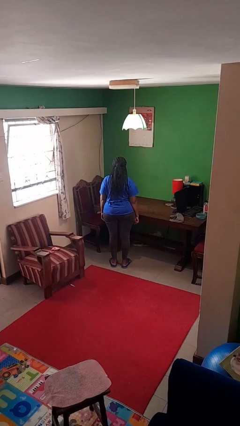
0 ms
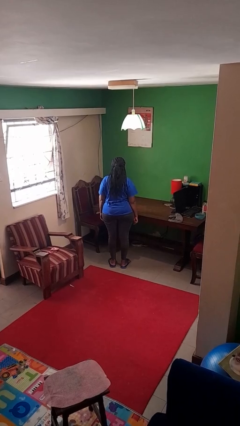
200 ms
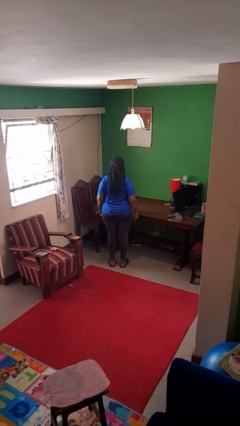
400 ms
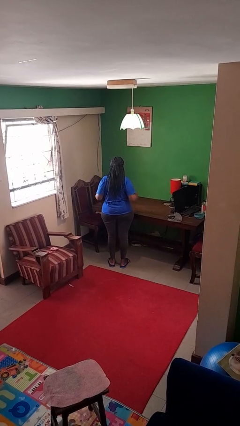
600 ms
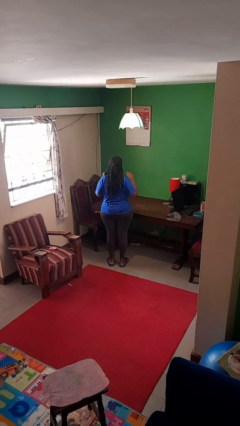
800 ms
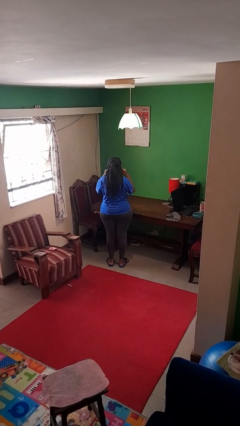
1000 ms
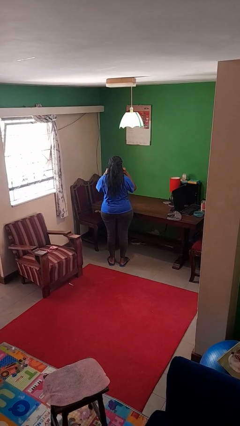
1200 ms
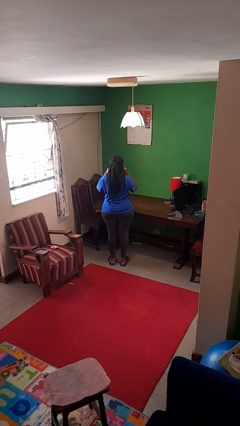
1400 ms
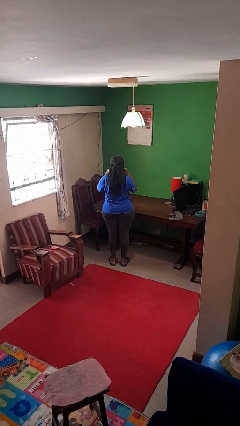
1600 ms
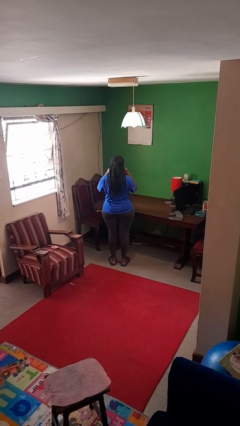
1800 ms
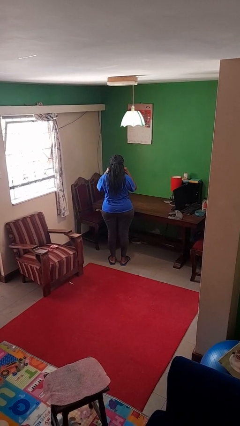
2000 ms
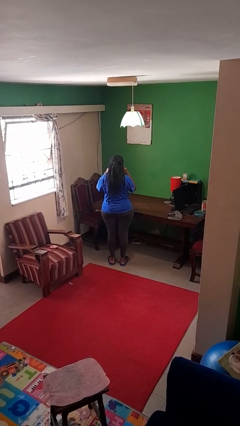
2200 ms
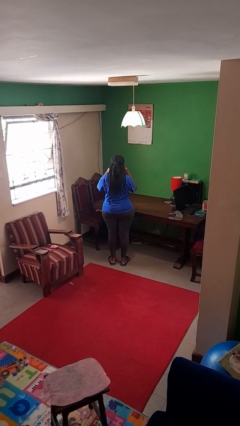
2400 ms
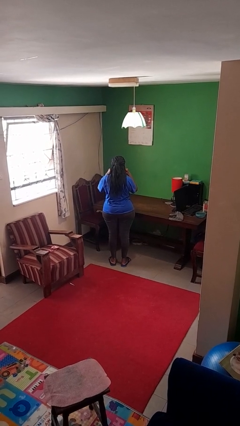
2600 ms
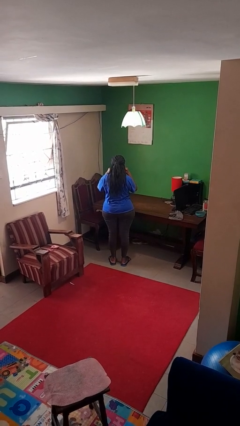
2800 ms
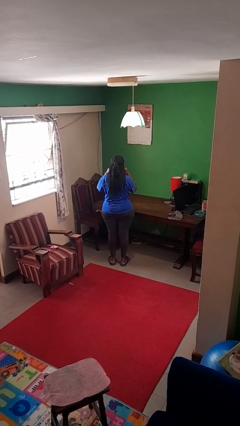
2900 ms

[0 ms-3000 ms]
person puts fingers in ear

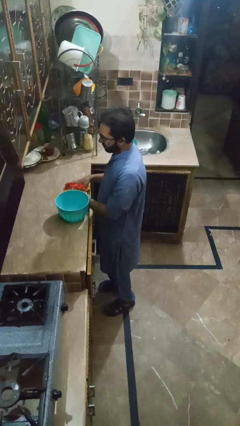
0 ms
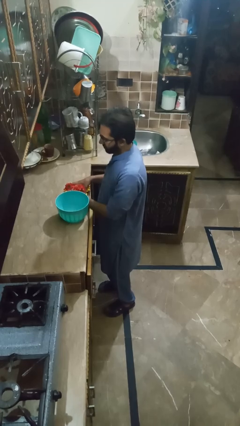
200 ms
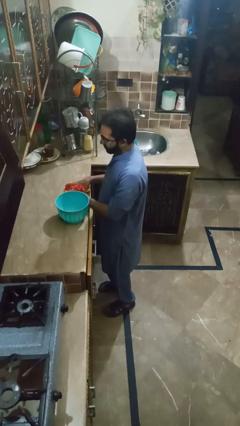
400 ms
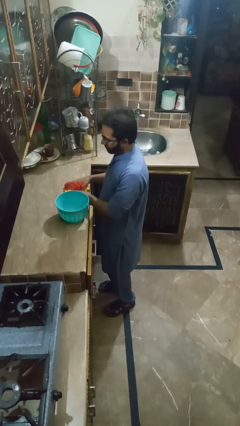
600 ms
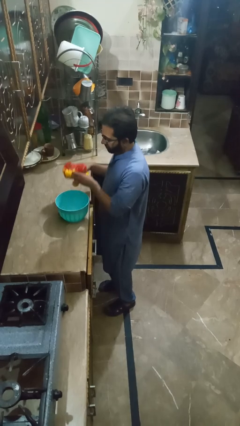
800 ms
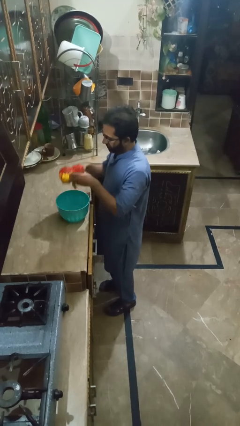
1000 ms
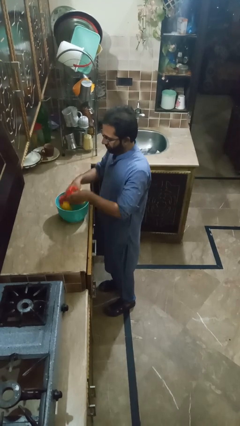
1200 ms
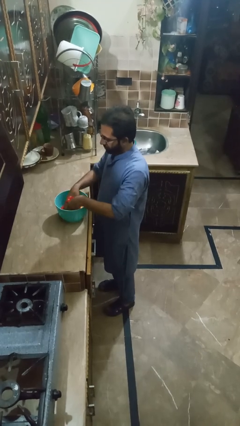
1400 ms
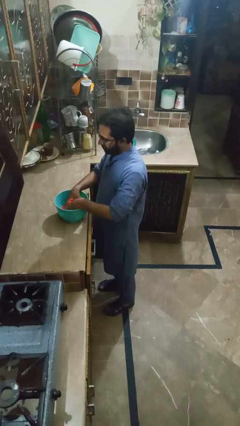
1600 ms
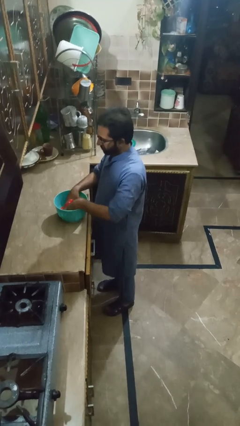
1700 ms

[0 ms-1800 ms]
person pours into bowl

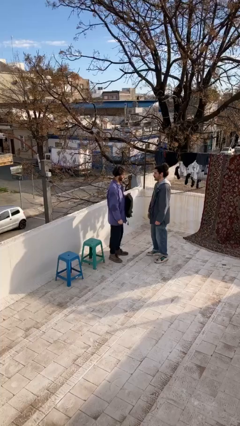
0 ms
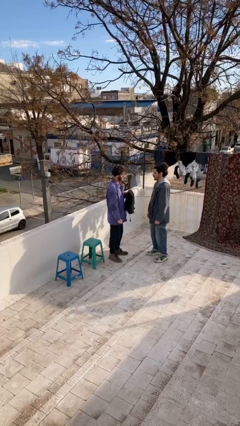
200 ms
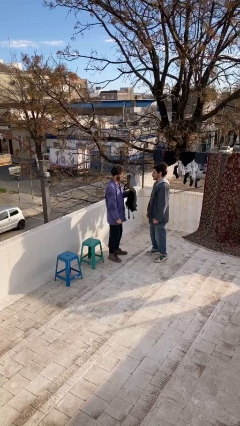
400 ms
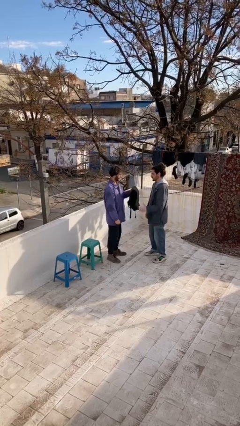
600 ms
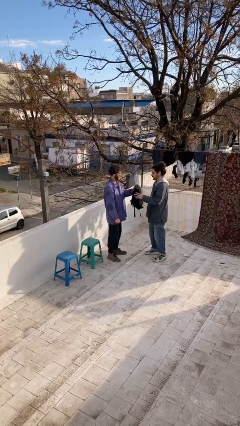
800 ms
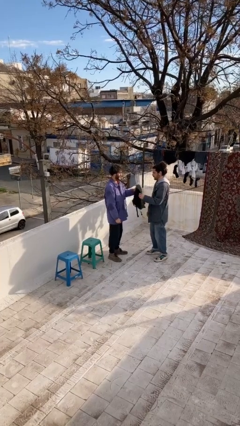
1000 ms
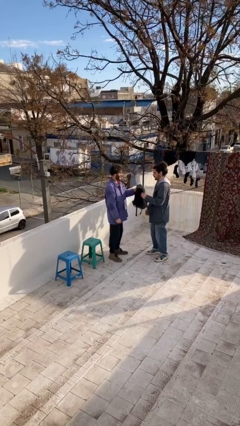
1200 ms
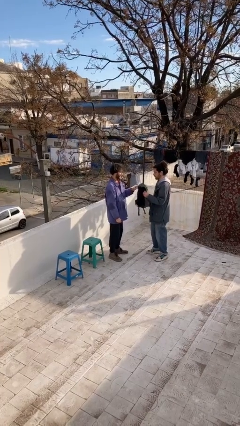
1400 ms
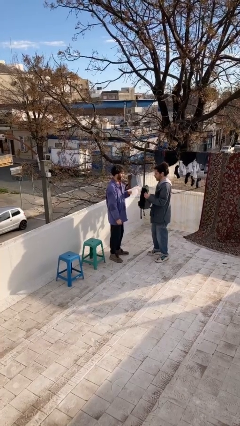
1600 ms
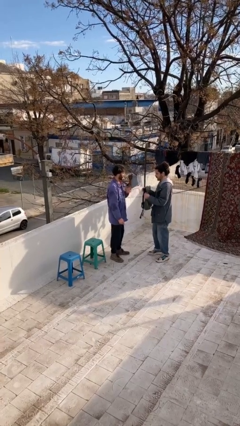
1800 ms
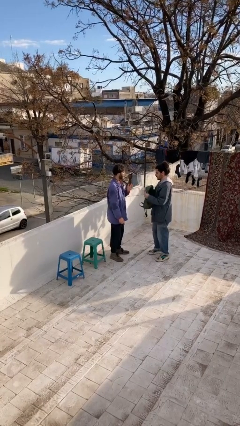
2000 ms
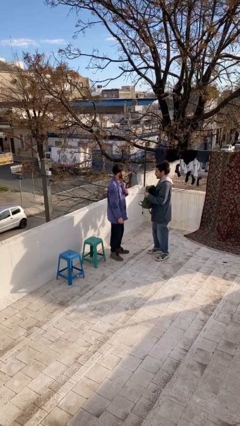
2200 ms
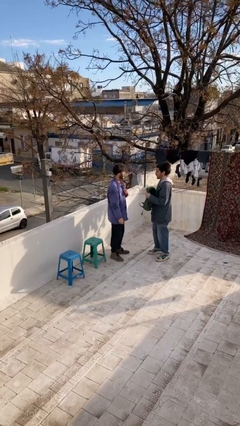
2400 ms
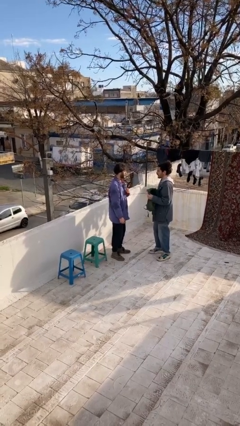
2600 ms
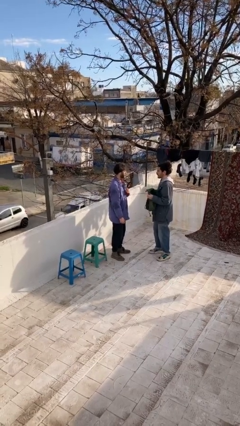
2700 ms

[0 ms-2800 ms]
person transfers object to person

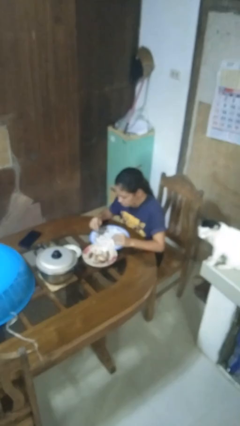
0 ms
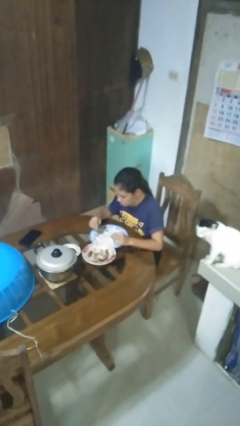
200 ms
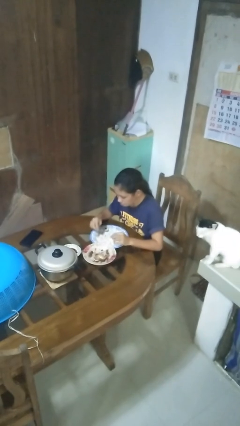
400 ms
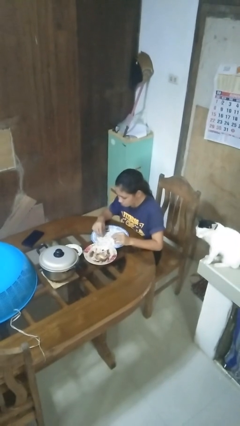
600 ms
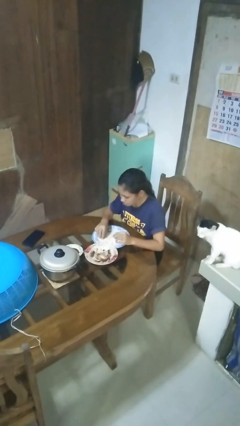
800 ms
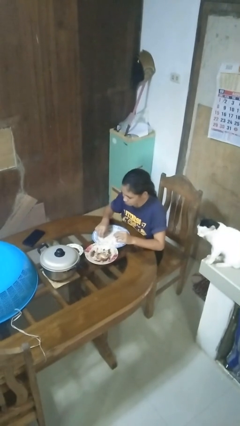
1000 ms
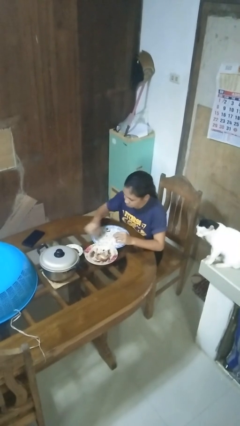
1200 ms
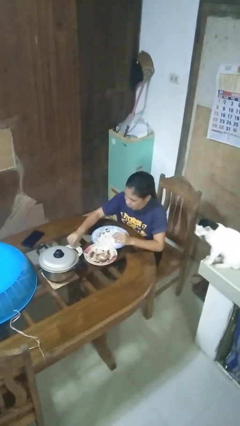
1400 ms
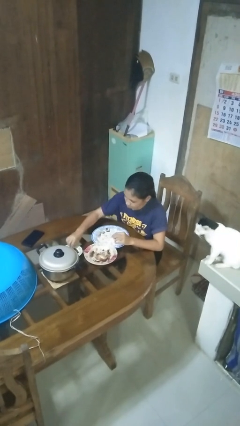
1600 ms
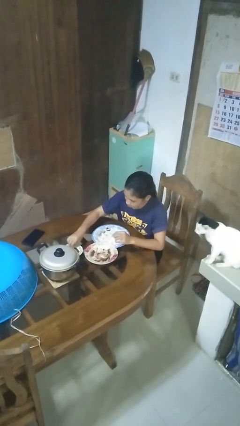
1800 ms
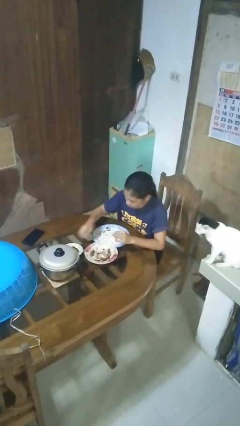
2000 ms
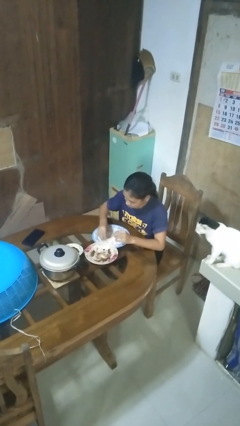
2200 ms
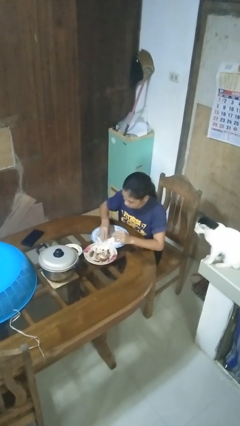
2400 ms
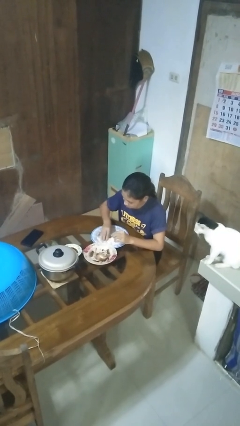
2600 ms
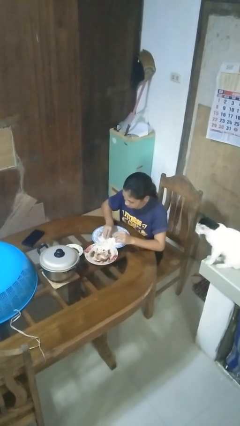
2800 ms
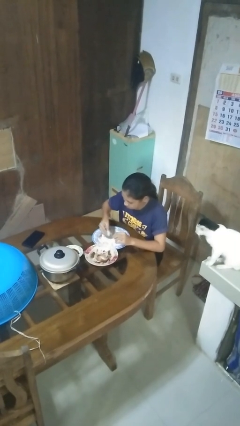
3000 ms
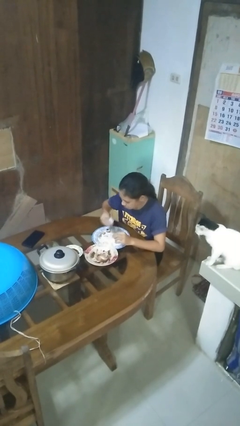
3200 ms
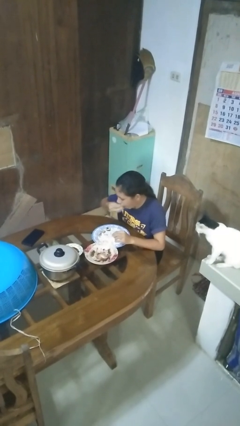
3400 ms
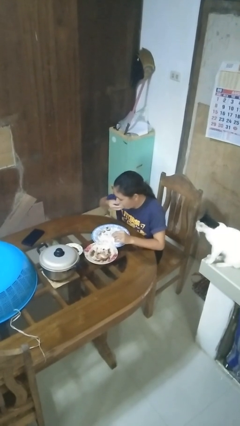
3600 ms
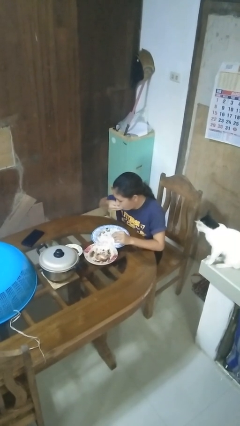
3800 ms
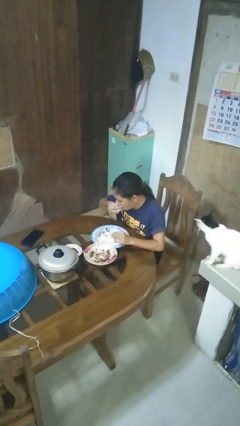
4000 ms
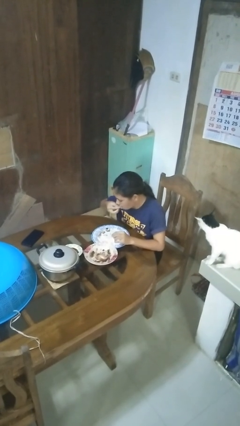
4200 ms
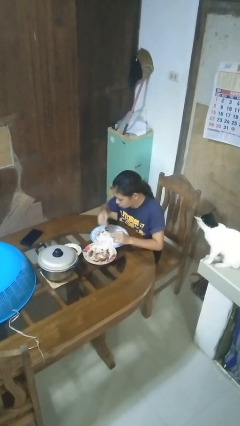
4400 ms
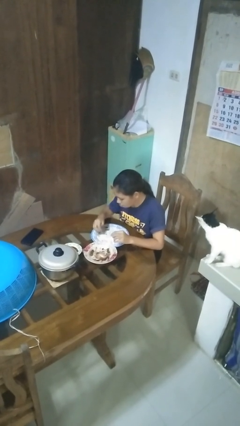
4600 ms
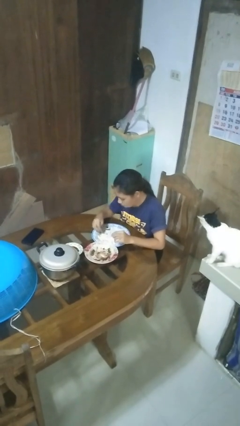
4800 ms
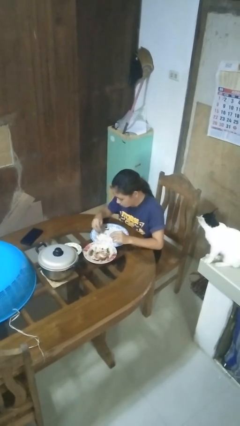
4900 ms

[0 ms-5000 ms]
person eats with hands

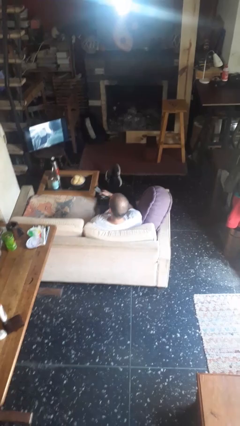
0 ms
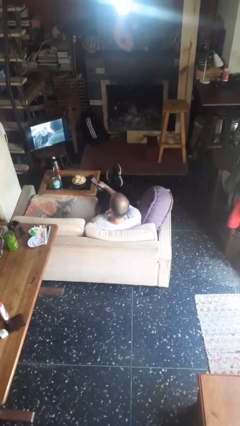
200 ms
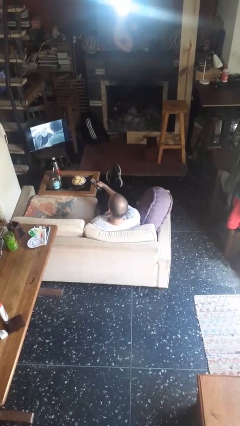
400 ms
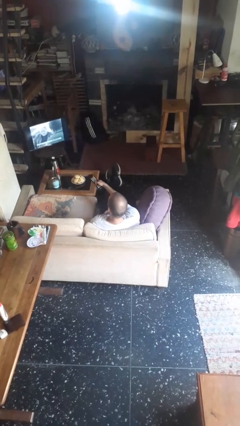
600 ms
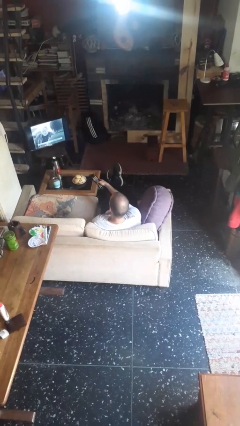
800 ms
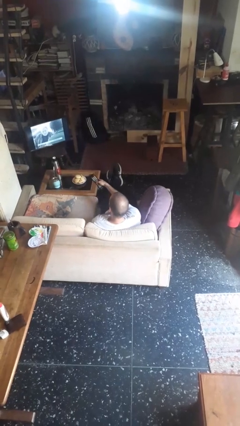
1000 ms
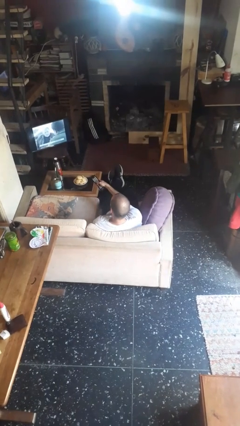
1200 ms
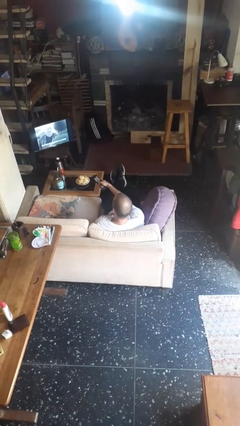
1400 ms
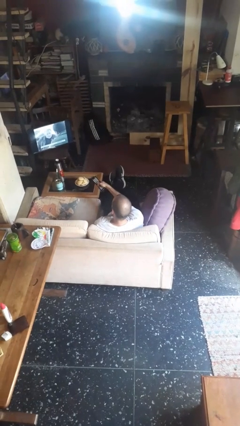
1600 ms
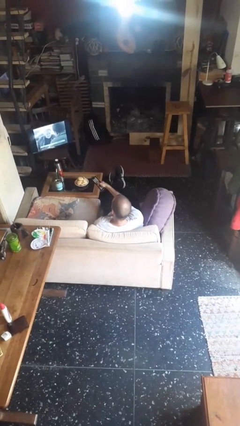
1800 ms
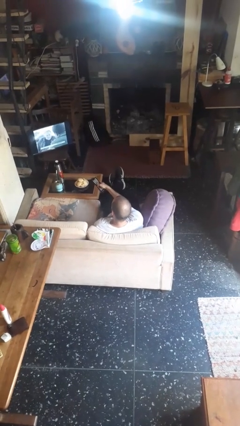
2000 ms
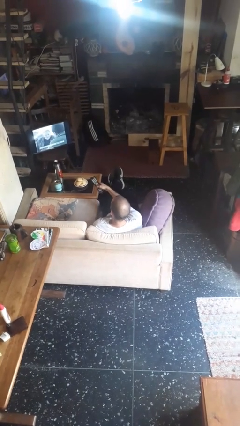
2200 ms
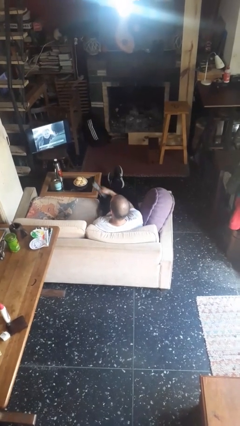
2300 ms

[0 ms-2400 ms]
person uses television remote

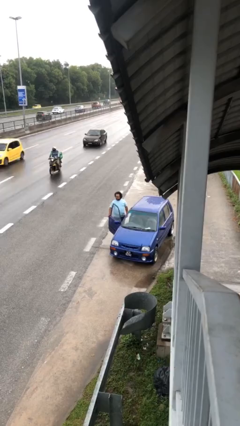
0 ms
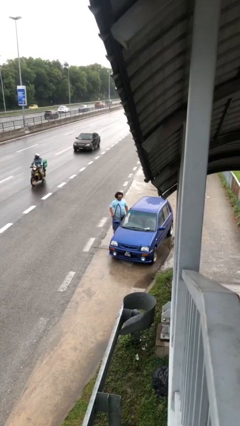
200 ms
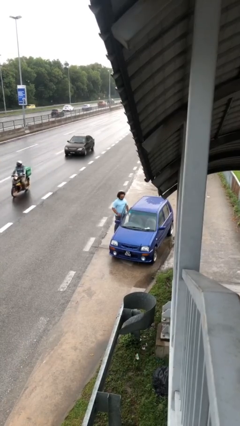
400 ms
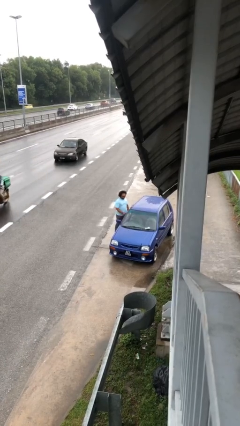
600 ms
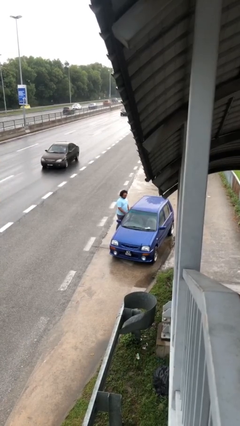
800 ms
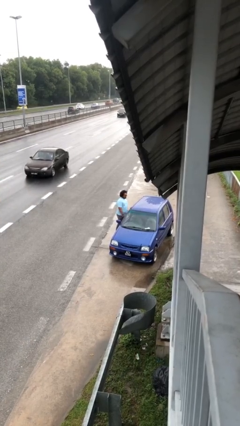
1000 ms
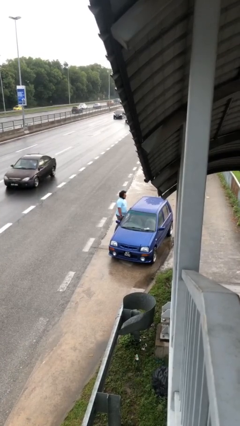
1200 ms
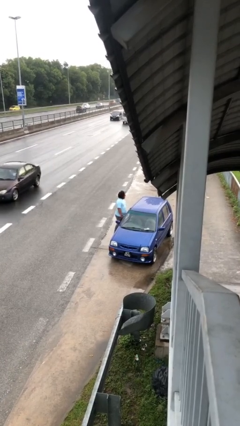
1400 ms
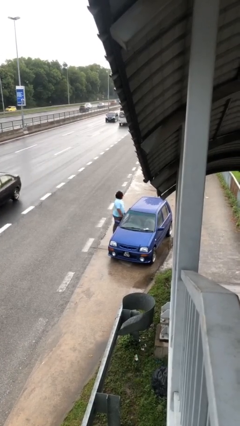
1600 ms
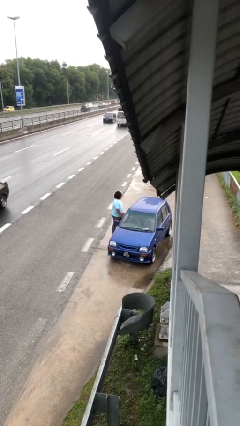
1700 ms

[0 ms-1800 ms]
person closes car door

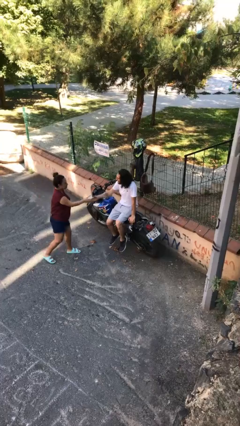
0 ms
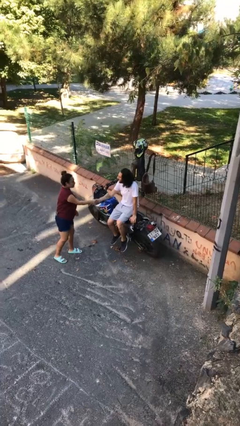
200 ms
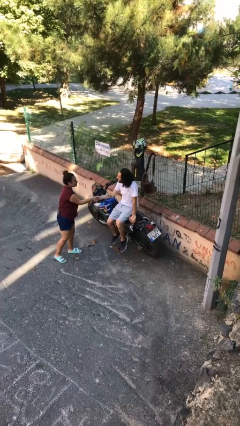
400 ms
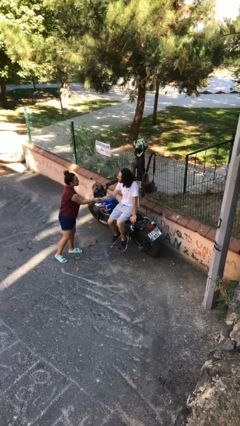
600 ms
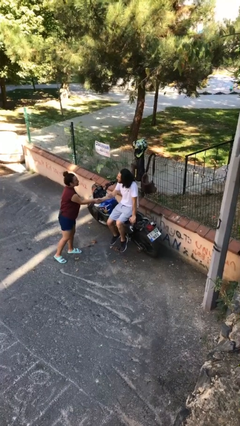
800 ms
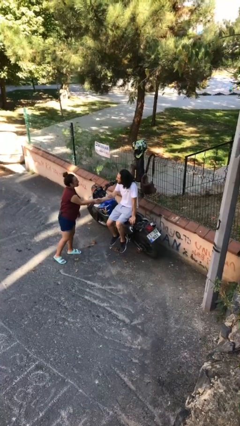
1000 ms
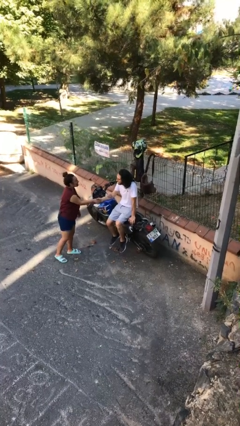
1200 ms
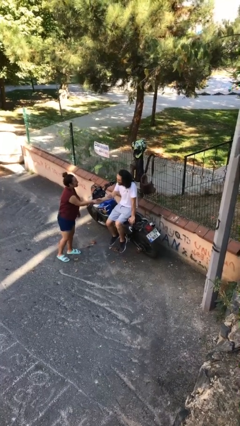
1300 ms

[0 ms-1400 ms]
person shakes hand
